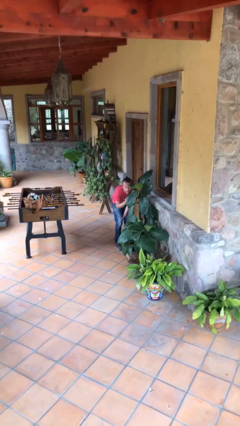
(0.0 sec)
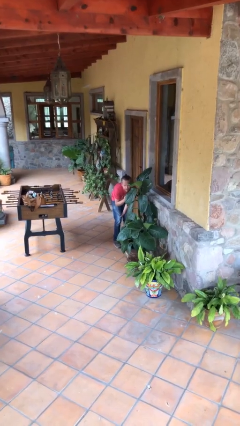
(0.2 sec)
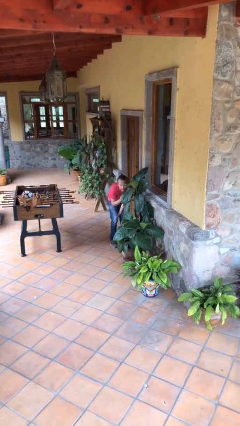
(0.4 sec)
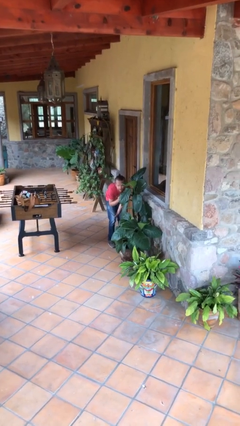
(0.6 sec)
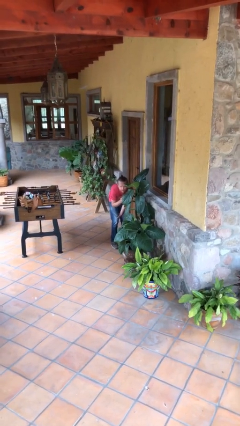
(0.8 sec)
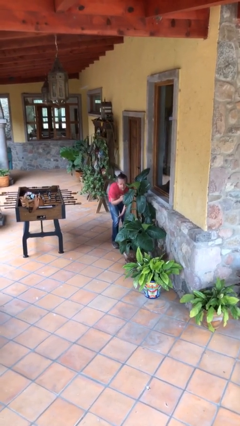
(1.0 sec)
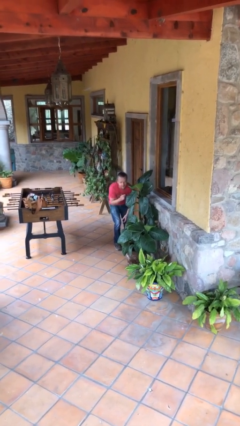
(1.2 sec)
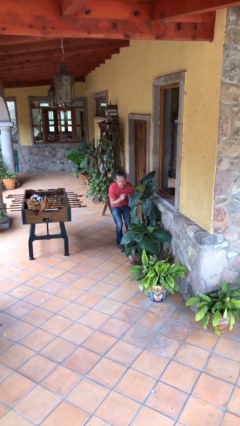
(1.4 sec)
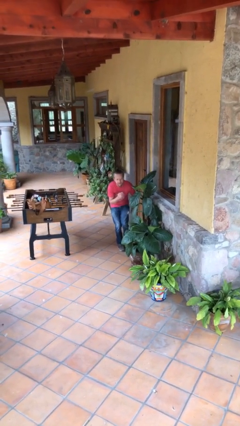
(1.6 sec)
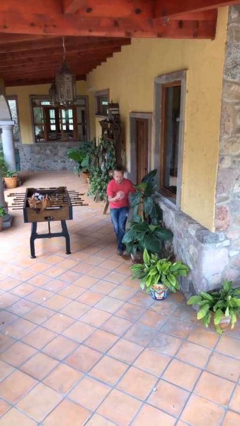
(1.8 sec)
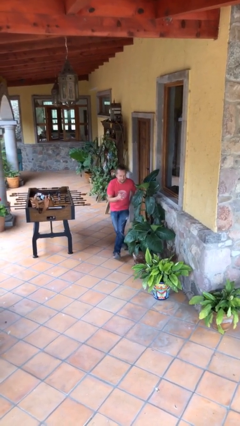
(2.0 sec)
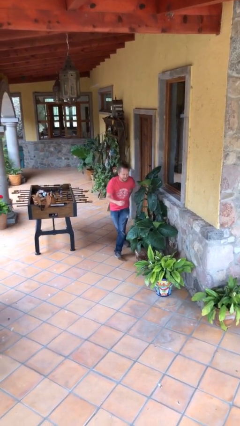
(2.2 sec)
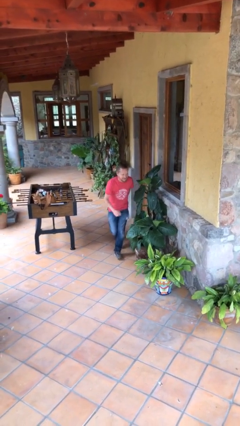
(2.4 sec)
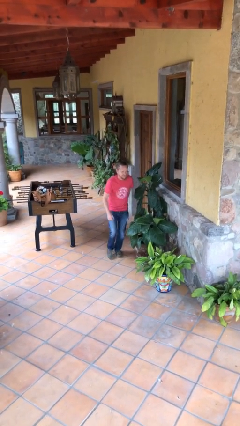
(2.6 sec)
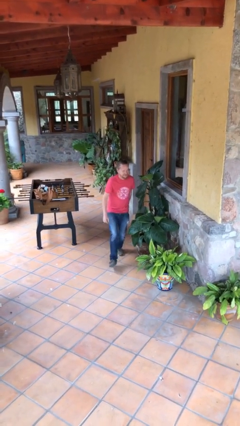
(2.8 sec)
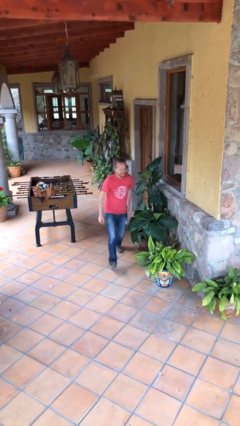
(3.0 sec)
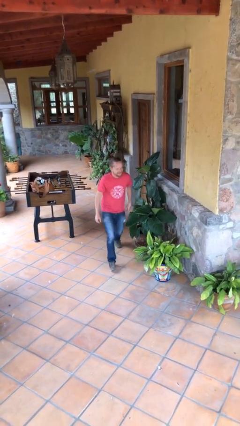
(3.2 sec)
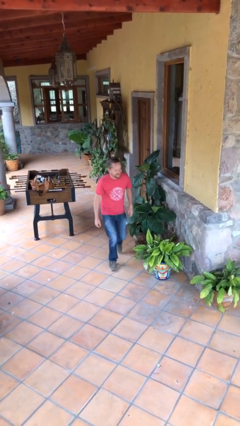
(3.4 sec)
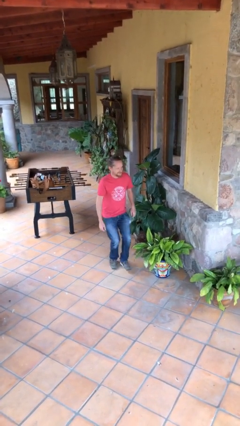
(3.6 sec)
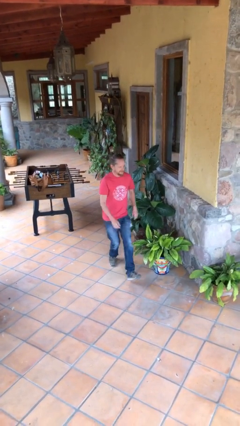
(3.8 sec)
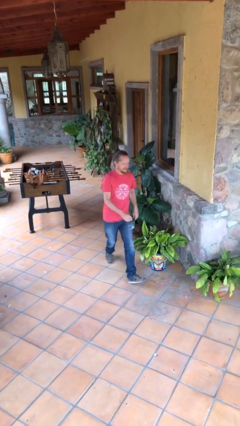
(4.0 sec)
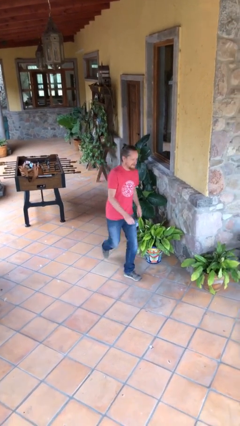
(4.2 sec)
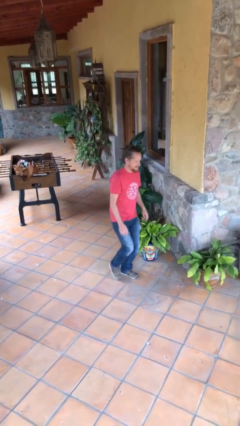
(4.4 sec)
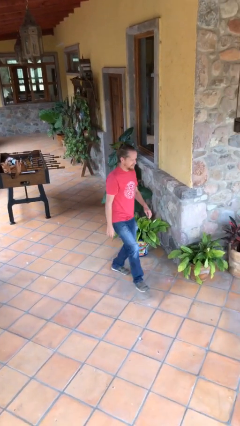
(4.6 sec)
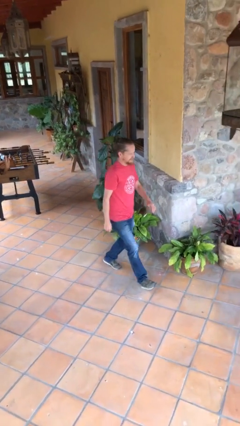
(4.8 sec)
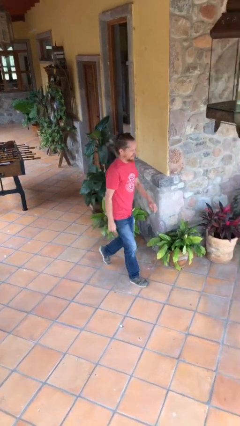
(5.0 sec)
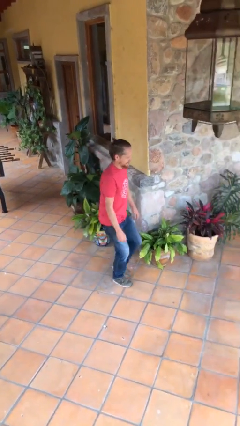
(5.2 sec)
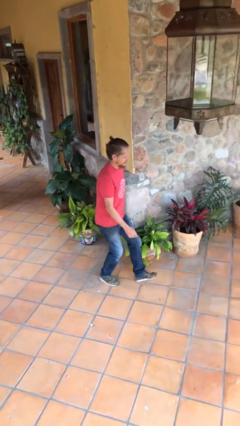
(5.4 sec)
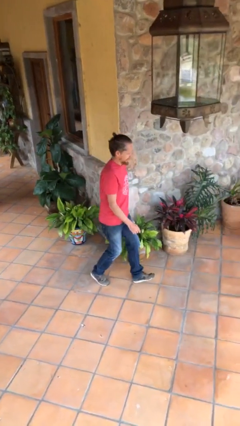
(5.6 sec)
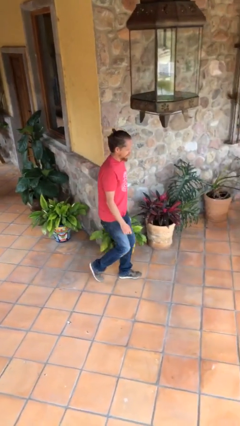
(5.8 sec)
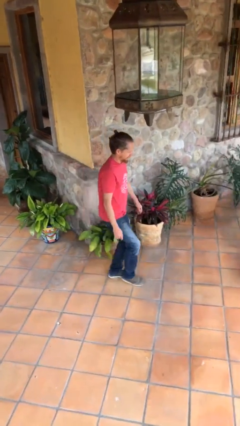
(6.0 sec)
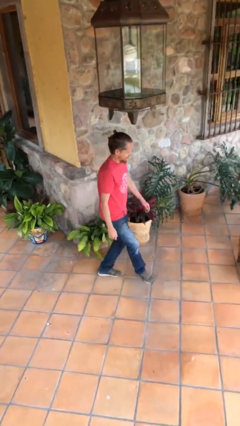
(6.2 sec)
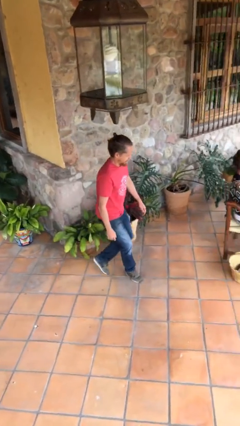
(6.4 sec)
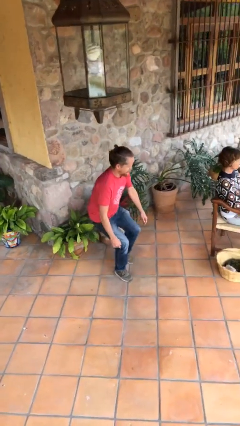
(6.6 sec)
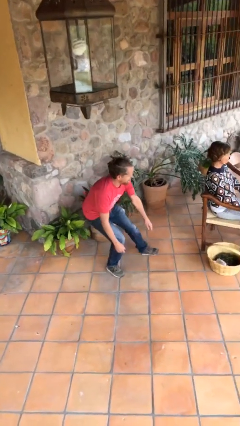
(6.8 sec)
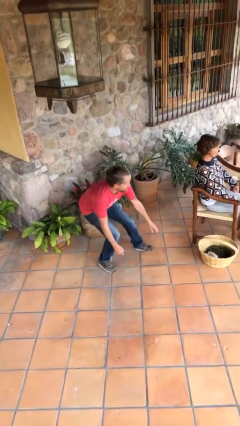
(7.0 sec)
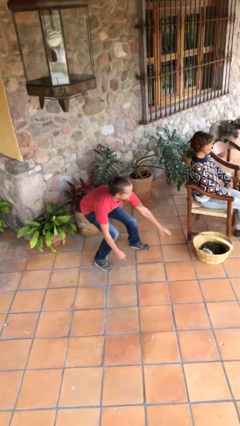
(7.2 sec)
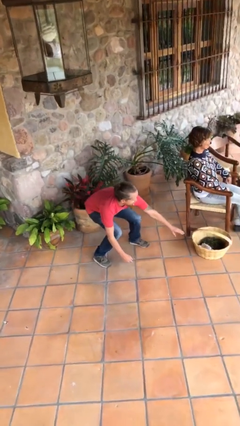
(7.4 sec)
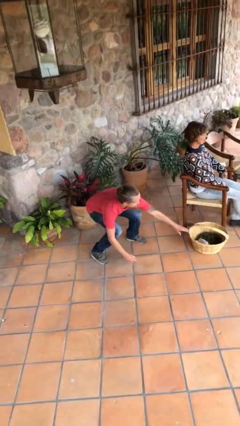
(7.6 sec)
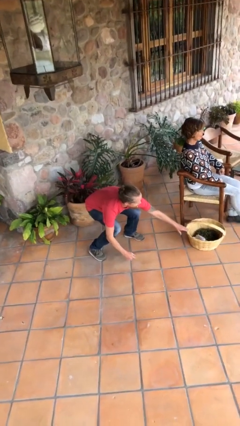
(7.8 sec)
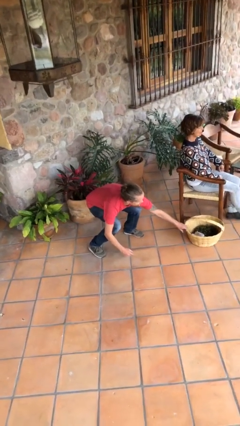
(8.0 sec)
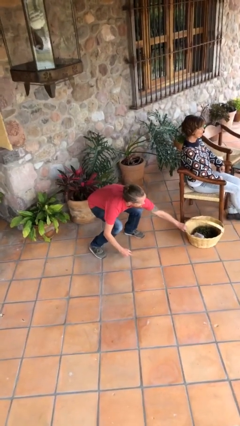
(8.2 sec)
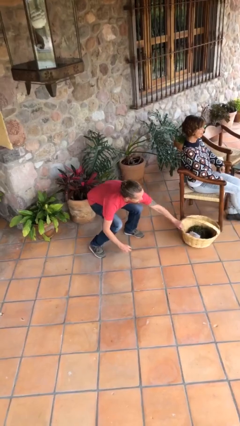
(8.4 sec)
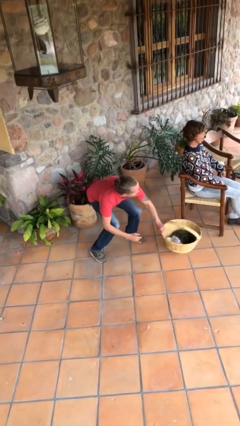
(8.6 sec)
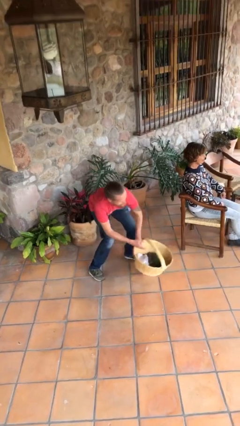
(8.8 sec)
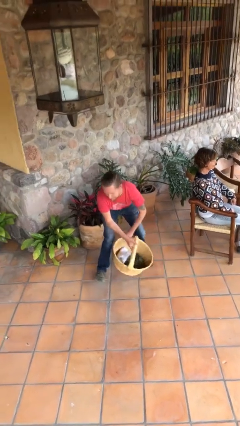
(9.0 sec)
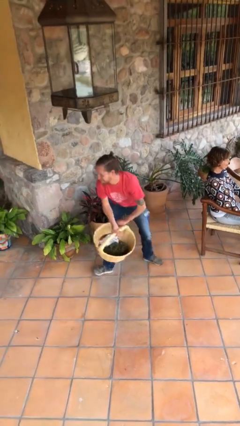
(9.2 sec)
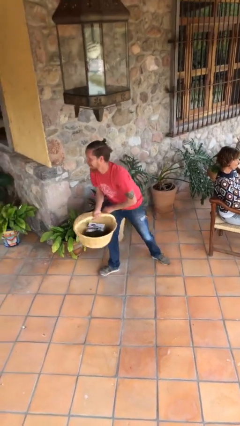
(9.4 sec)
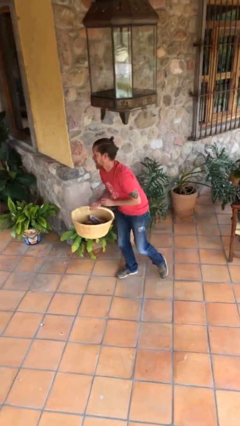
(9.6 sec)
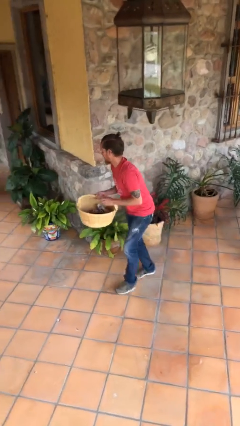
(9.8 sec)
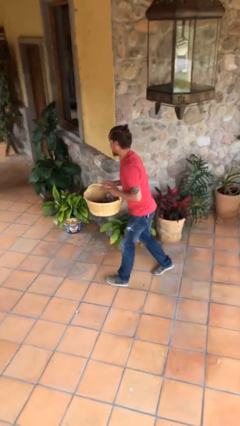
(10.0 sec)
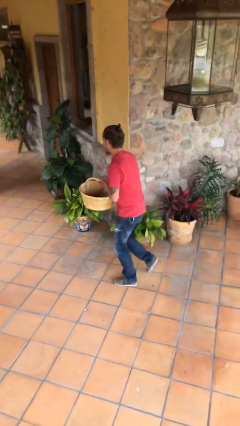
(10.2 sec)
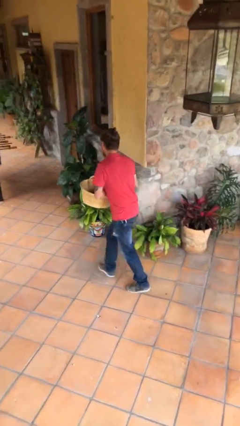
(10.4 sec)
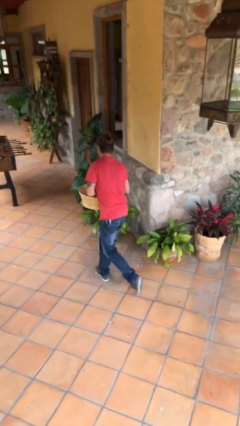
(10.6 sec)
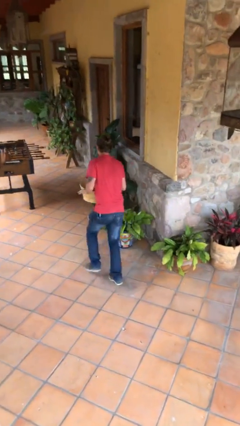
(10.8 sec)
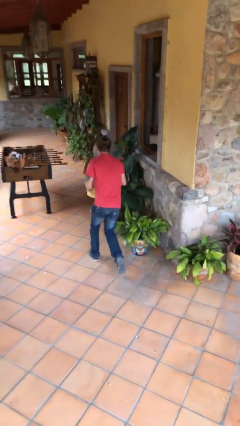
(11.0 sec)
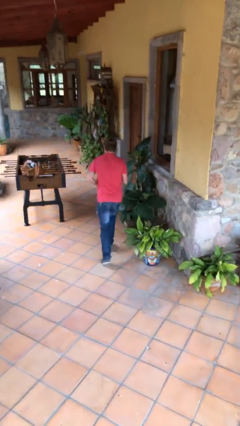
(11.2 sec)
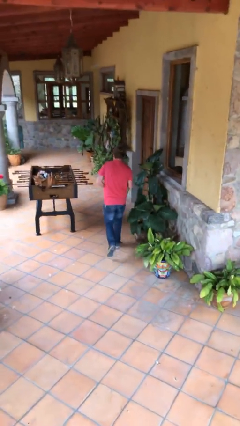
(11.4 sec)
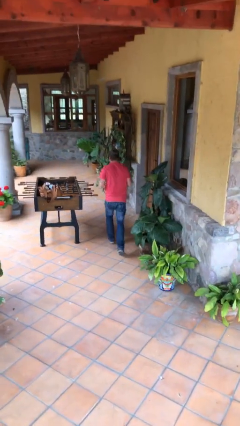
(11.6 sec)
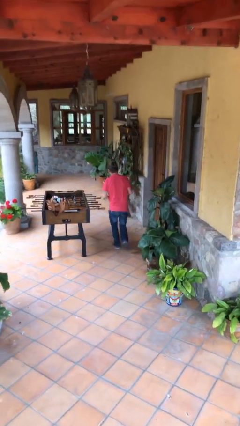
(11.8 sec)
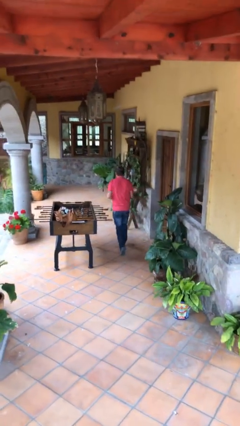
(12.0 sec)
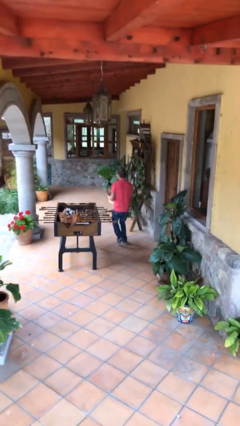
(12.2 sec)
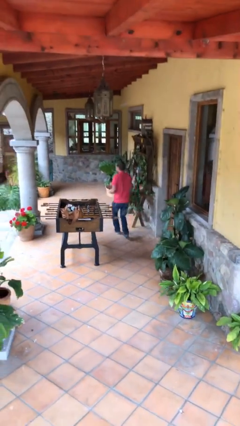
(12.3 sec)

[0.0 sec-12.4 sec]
person steals object from person

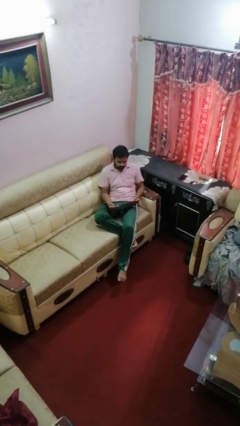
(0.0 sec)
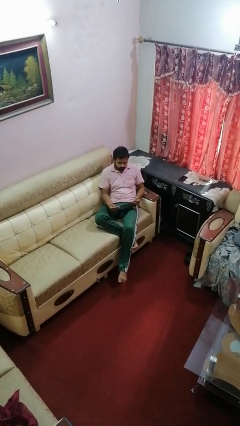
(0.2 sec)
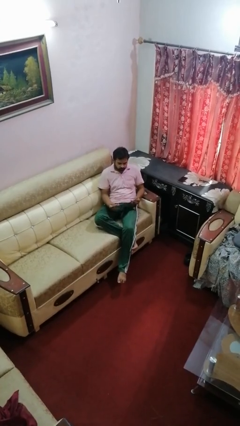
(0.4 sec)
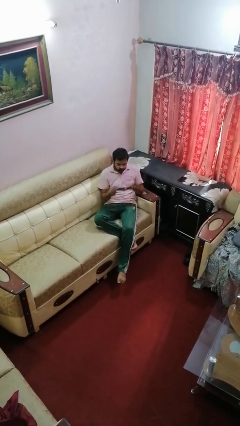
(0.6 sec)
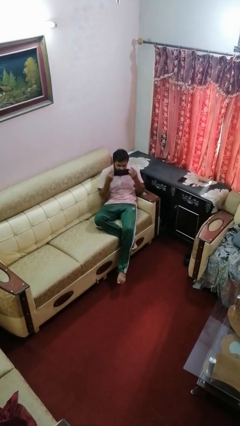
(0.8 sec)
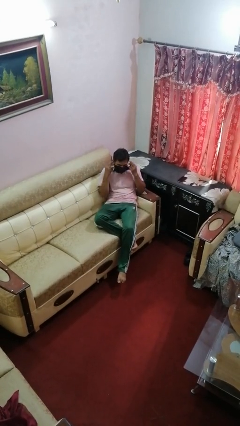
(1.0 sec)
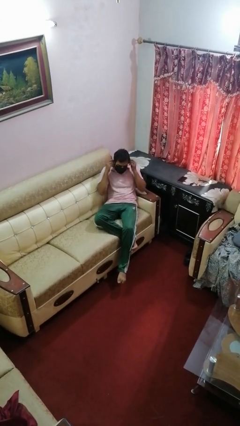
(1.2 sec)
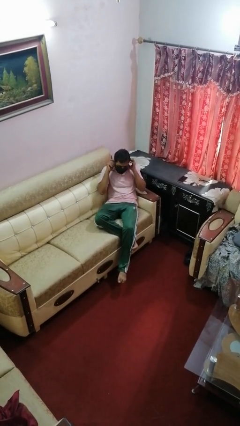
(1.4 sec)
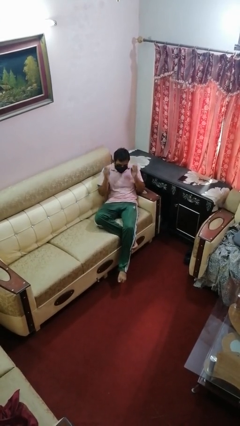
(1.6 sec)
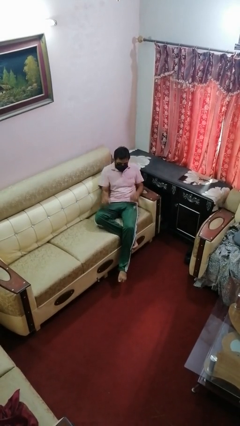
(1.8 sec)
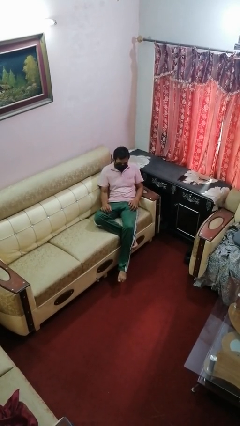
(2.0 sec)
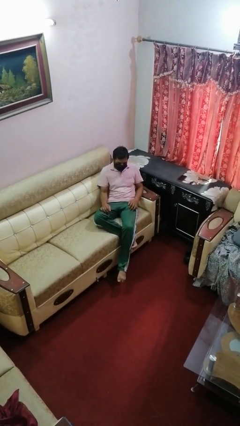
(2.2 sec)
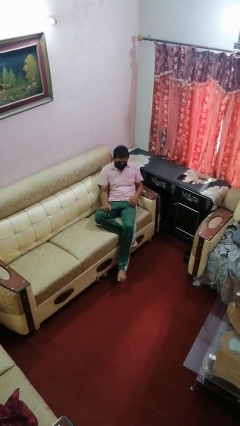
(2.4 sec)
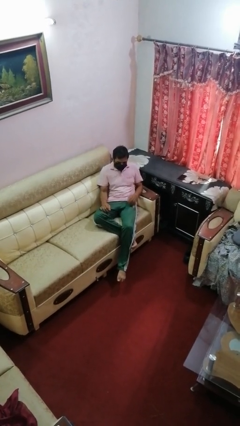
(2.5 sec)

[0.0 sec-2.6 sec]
person puts on facemask

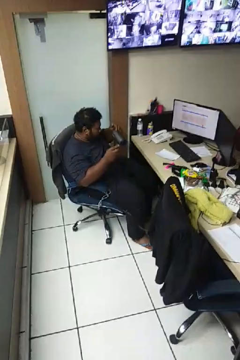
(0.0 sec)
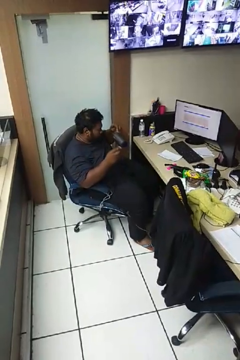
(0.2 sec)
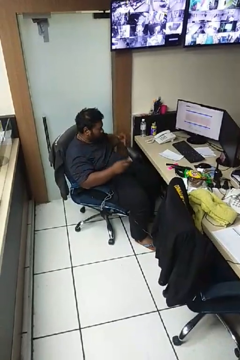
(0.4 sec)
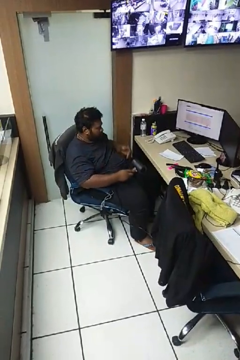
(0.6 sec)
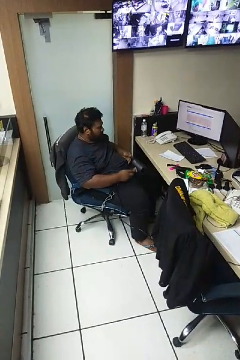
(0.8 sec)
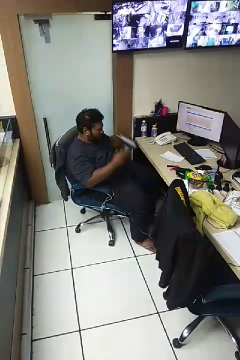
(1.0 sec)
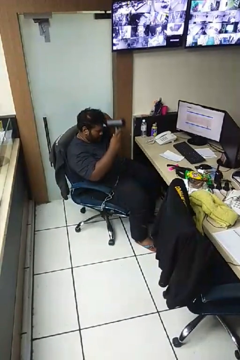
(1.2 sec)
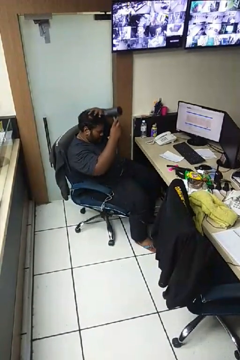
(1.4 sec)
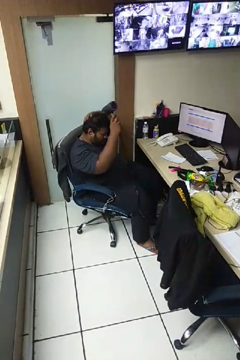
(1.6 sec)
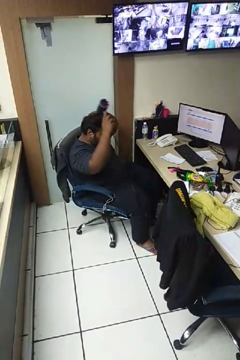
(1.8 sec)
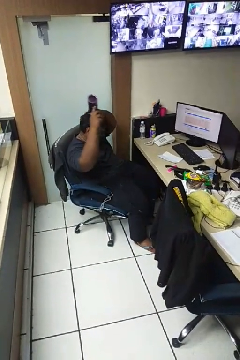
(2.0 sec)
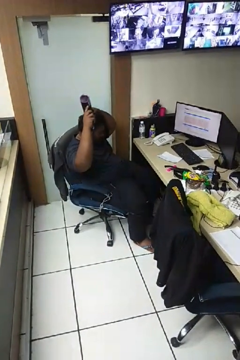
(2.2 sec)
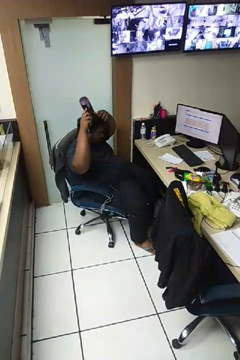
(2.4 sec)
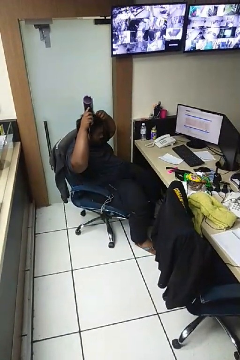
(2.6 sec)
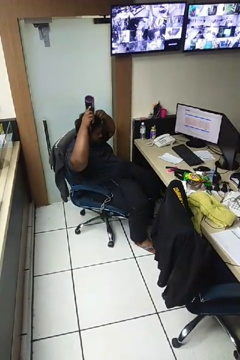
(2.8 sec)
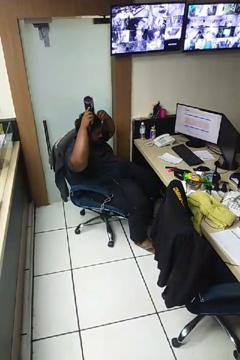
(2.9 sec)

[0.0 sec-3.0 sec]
person dries hair with hairdryer

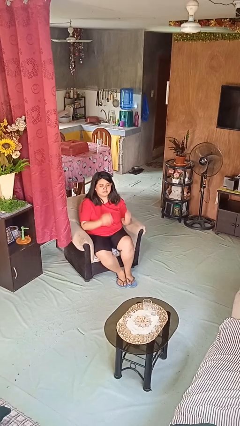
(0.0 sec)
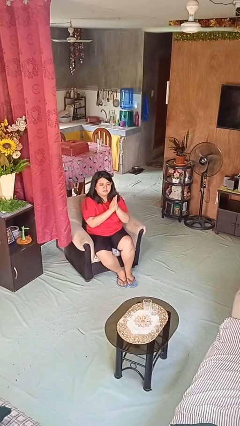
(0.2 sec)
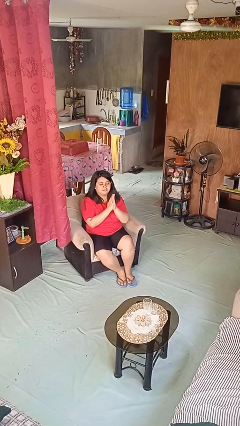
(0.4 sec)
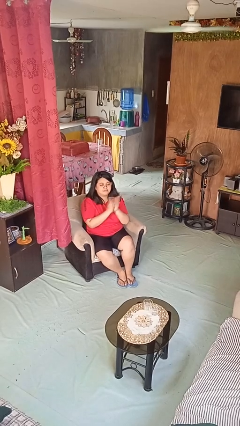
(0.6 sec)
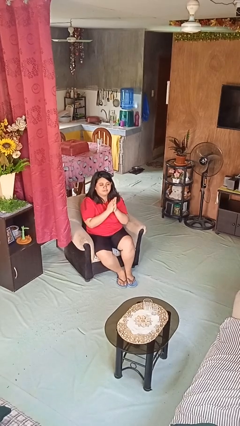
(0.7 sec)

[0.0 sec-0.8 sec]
person claps hands
